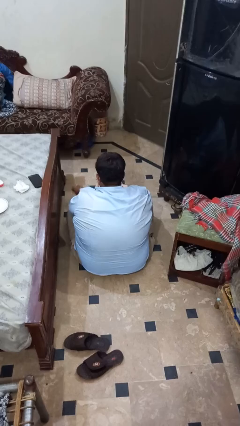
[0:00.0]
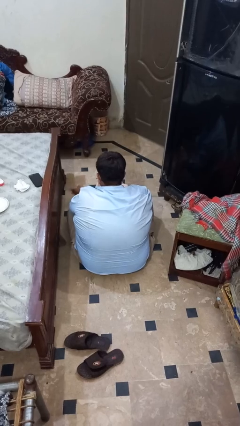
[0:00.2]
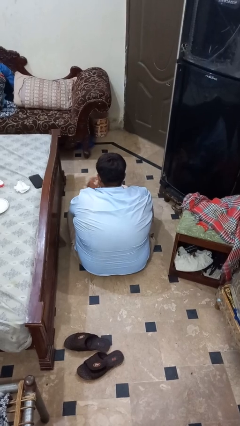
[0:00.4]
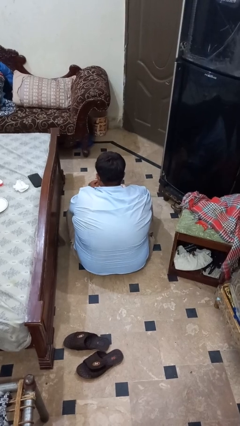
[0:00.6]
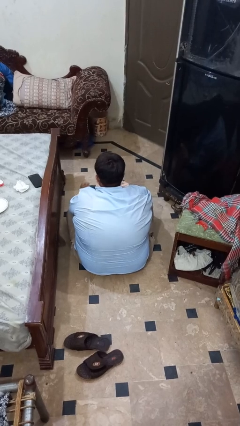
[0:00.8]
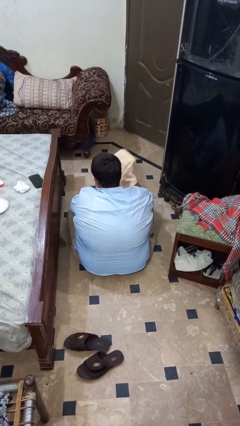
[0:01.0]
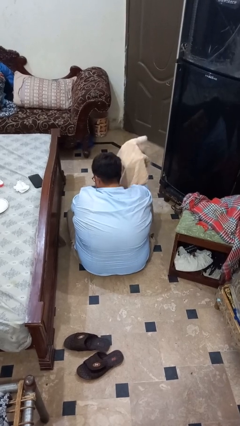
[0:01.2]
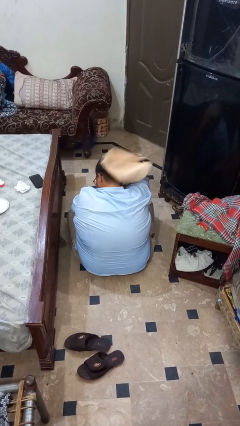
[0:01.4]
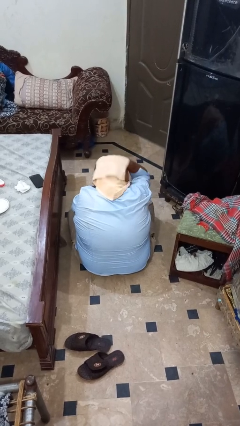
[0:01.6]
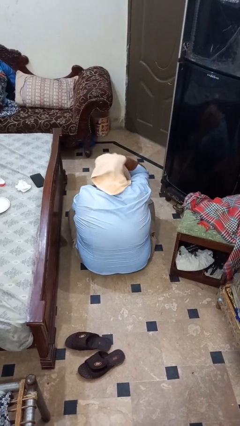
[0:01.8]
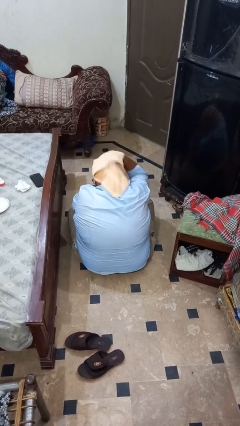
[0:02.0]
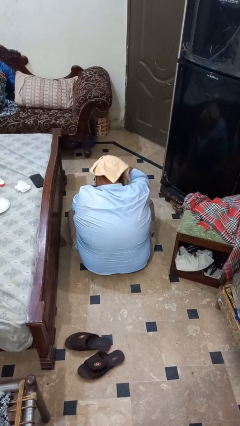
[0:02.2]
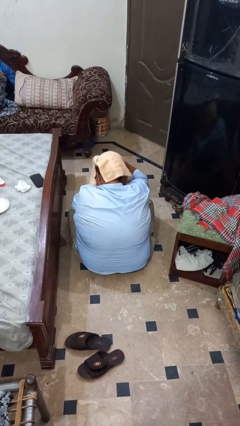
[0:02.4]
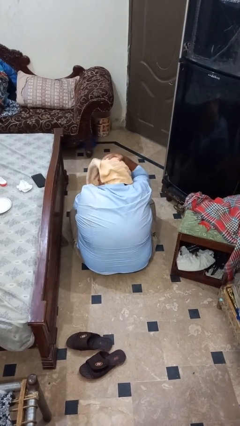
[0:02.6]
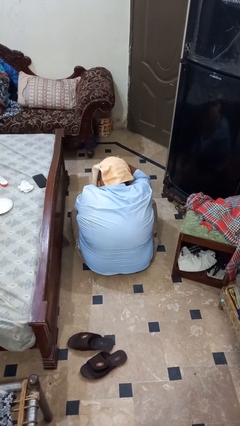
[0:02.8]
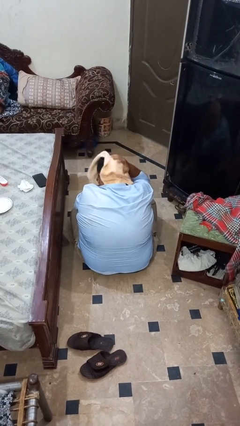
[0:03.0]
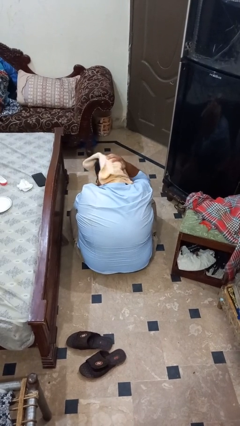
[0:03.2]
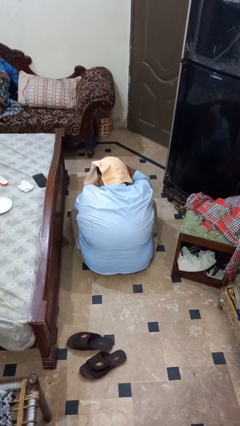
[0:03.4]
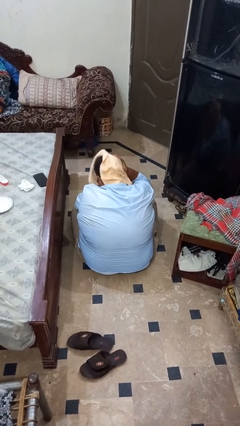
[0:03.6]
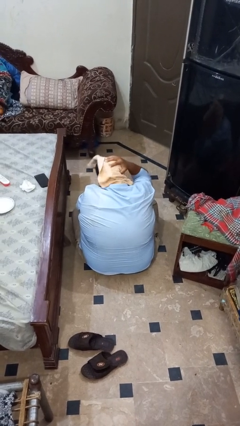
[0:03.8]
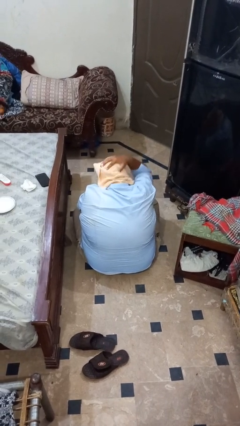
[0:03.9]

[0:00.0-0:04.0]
person dries hair with towel

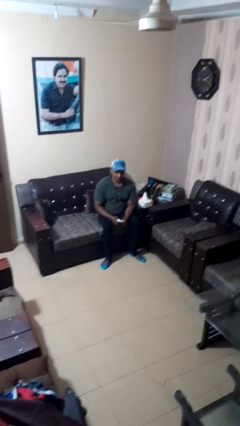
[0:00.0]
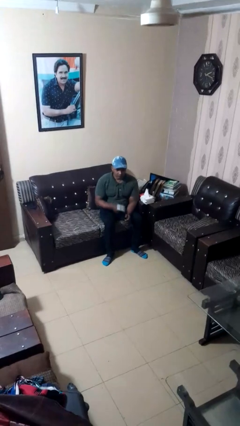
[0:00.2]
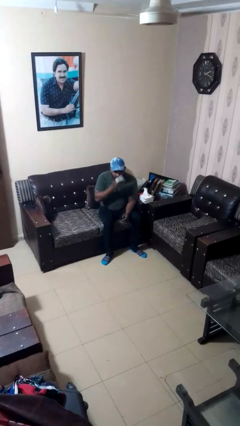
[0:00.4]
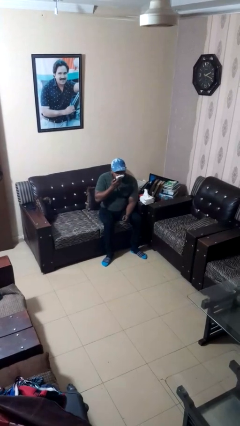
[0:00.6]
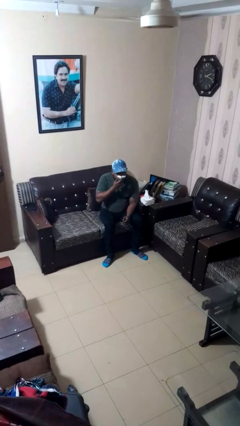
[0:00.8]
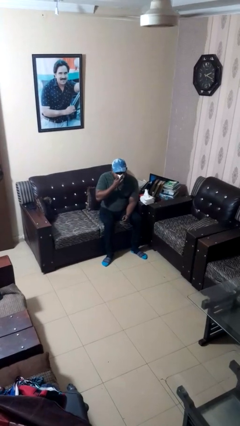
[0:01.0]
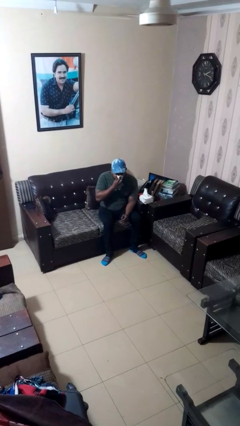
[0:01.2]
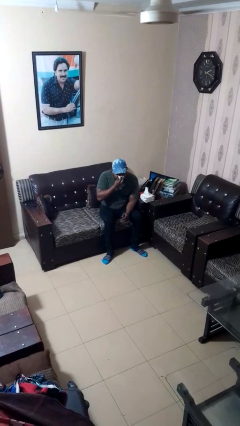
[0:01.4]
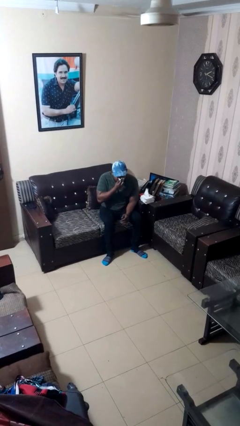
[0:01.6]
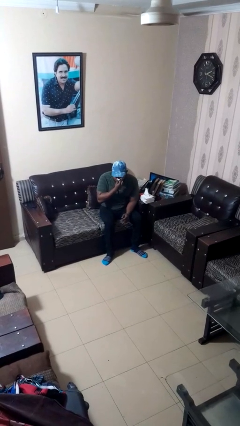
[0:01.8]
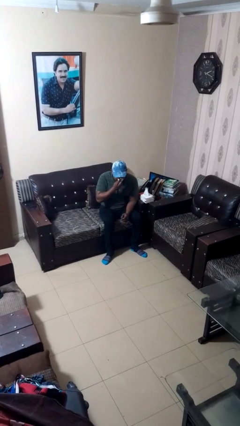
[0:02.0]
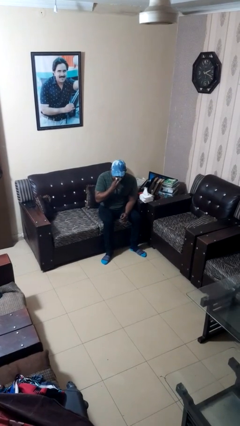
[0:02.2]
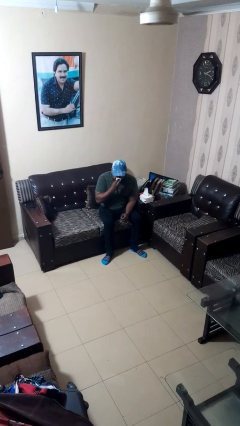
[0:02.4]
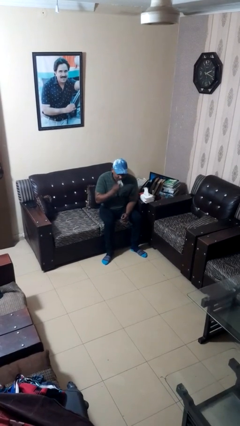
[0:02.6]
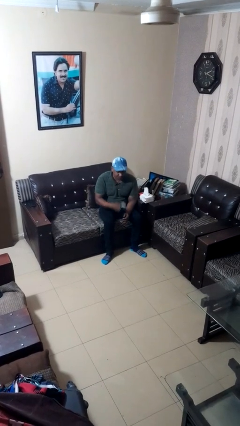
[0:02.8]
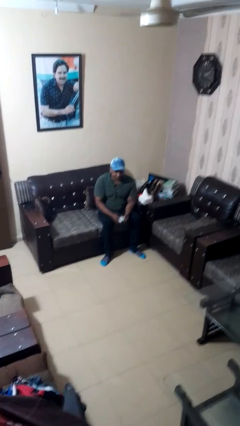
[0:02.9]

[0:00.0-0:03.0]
person blows nose

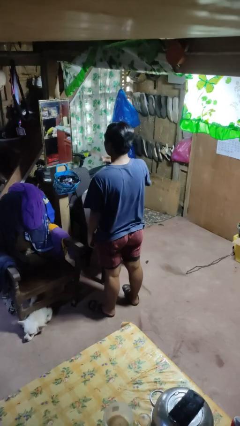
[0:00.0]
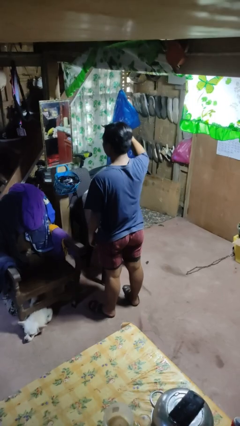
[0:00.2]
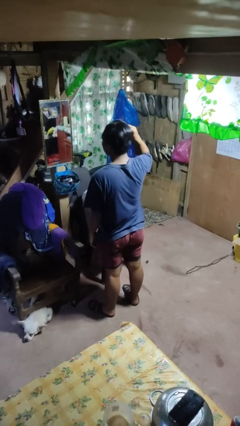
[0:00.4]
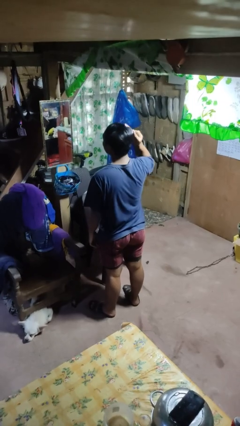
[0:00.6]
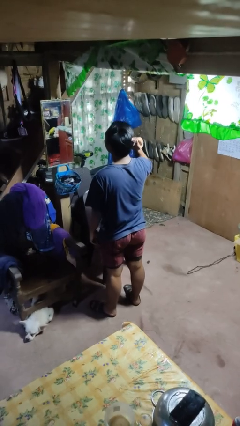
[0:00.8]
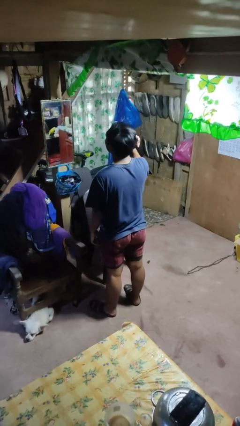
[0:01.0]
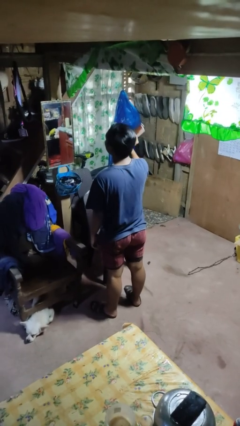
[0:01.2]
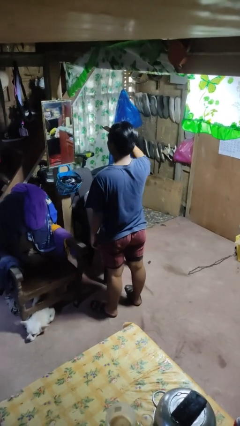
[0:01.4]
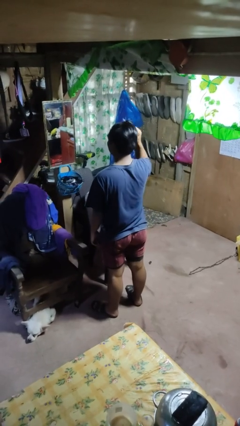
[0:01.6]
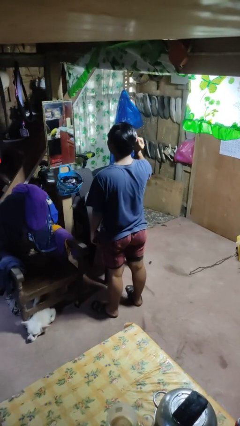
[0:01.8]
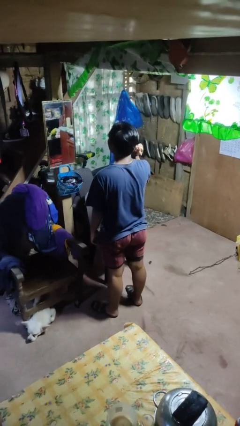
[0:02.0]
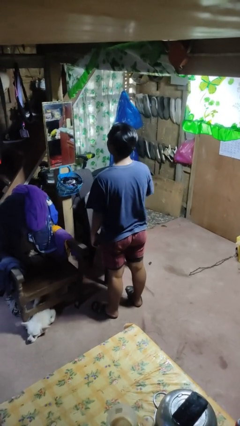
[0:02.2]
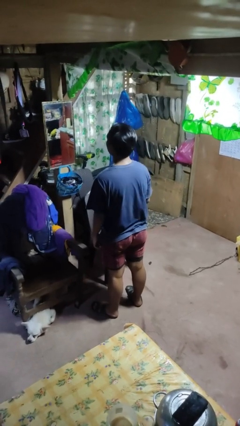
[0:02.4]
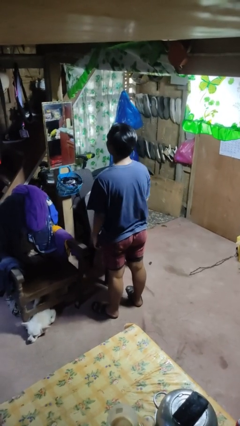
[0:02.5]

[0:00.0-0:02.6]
person brushes hair

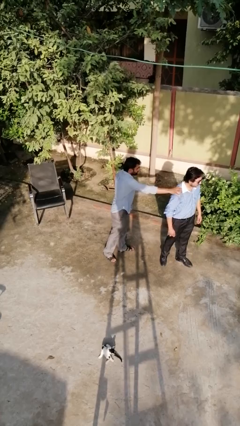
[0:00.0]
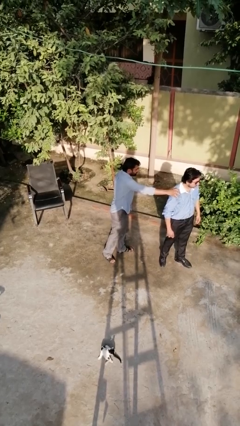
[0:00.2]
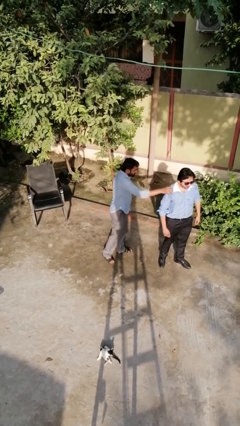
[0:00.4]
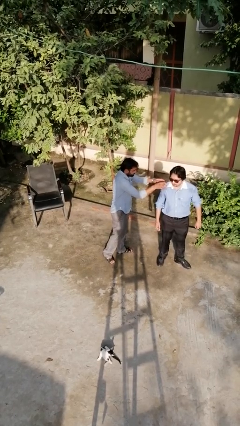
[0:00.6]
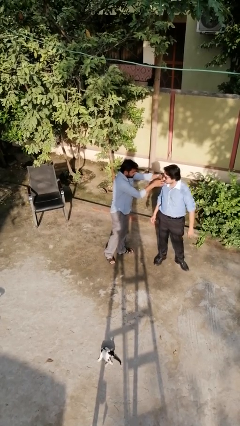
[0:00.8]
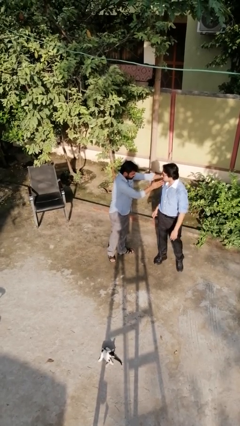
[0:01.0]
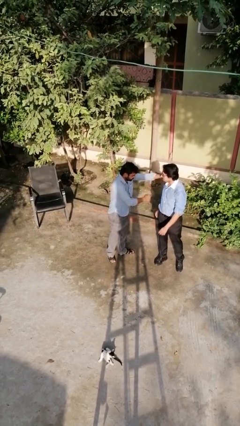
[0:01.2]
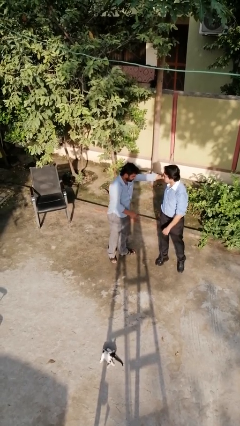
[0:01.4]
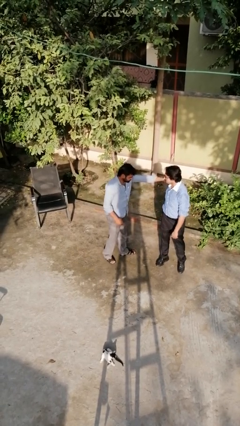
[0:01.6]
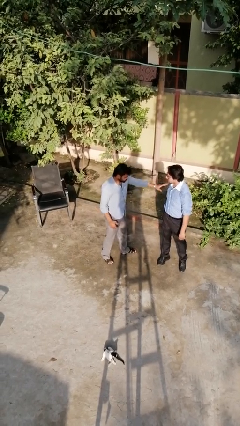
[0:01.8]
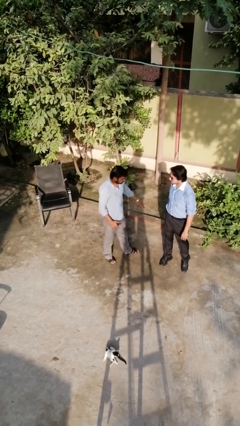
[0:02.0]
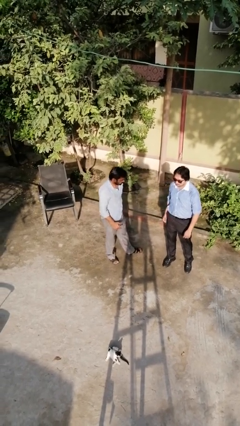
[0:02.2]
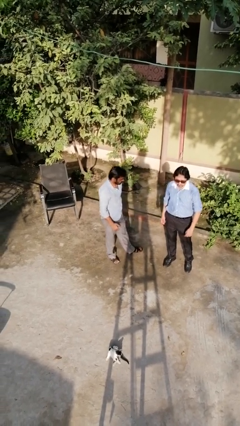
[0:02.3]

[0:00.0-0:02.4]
person spins person around

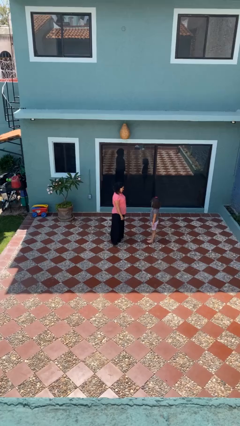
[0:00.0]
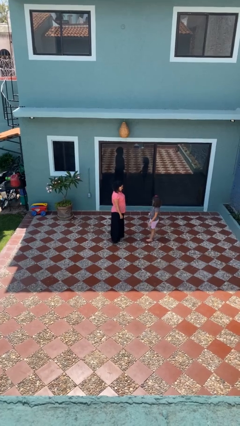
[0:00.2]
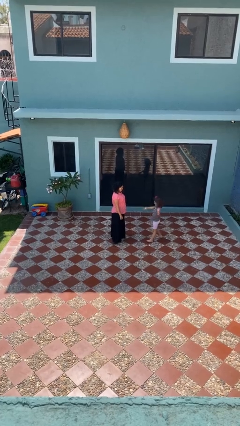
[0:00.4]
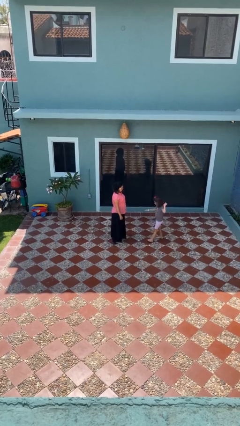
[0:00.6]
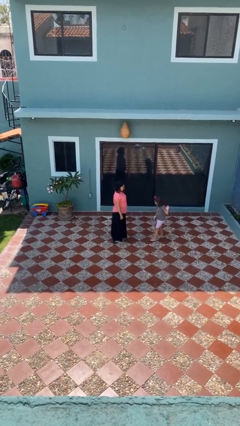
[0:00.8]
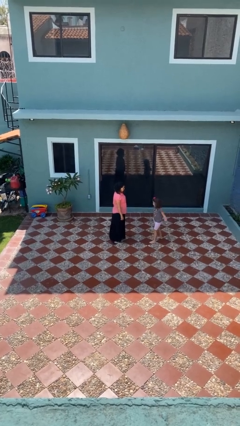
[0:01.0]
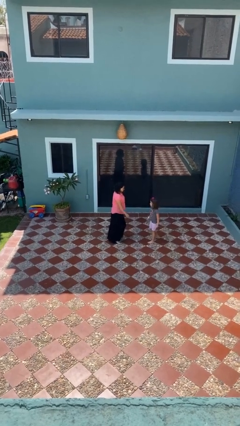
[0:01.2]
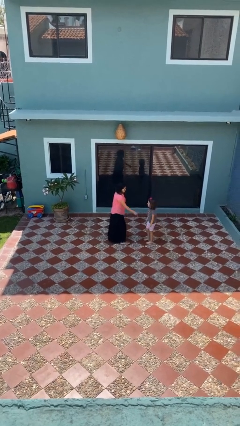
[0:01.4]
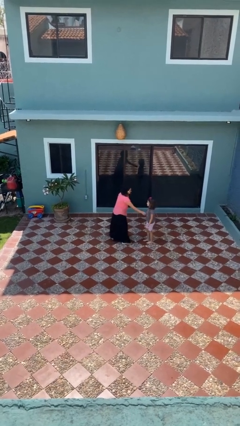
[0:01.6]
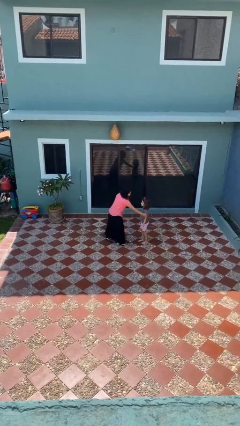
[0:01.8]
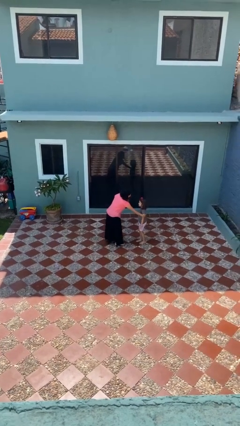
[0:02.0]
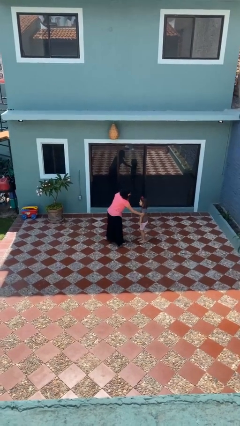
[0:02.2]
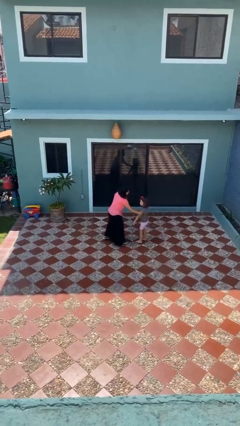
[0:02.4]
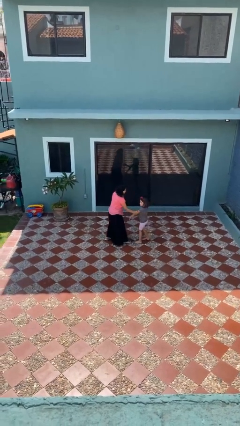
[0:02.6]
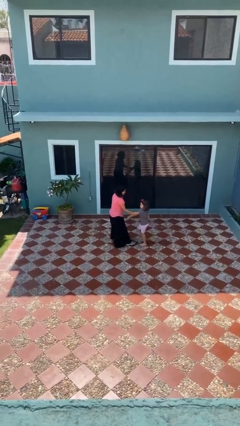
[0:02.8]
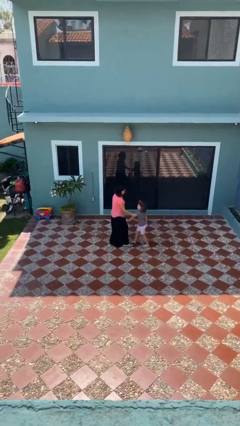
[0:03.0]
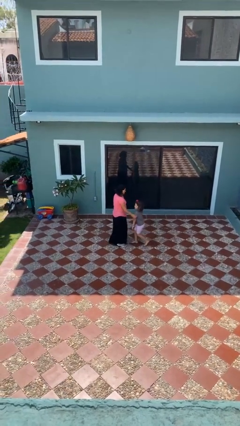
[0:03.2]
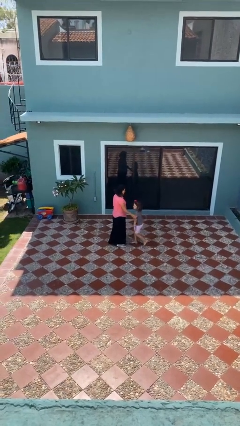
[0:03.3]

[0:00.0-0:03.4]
person grabs person by bicep

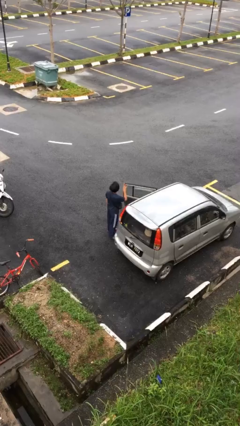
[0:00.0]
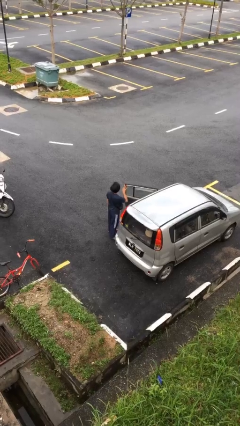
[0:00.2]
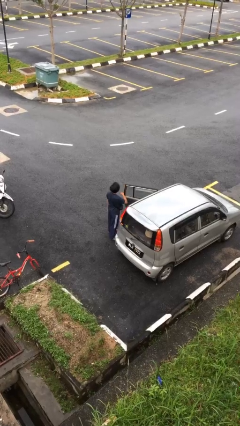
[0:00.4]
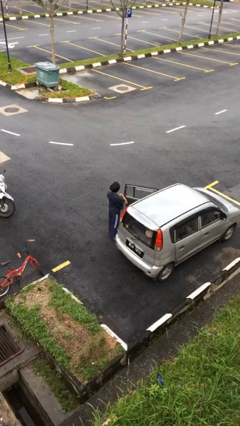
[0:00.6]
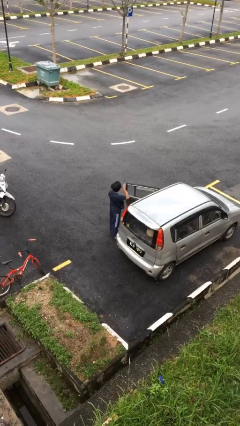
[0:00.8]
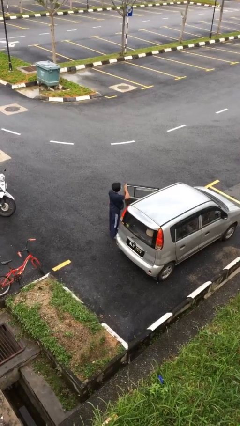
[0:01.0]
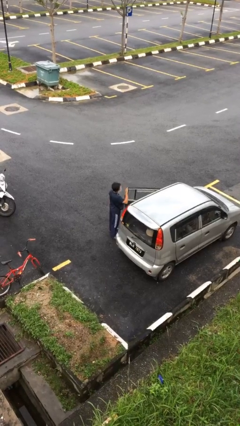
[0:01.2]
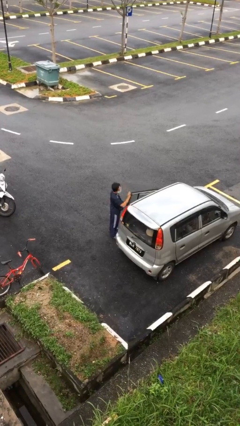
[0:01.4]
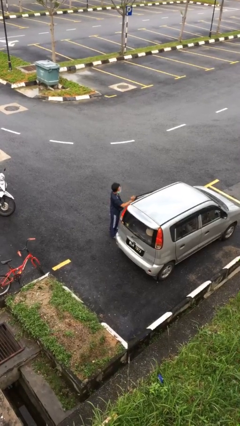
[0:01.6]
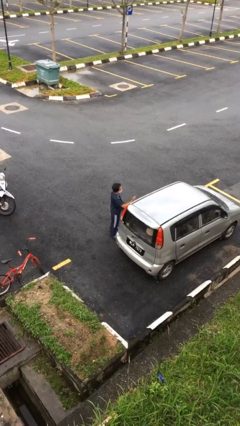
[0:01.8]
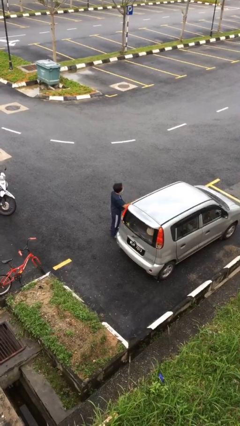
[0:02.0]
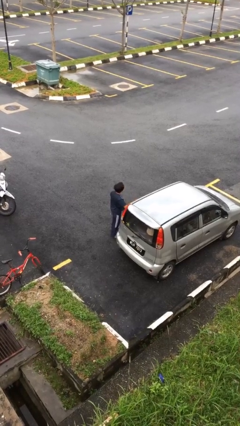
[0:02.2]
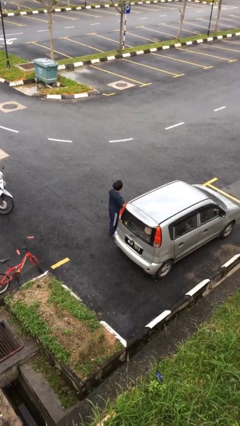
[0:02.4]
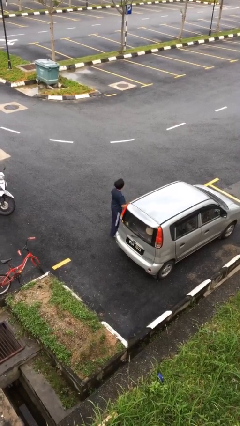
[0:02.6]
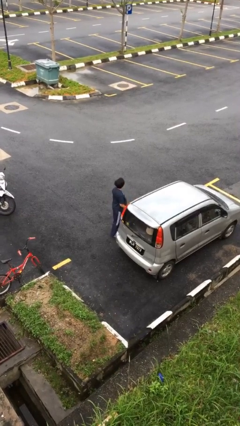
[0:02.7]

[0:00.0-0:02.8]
person closes car door
